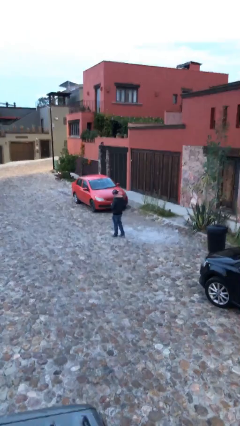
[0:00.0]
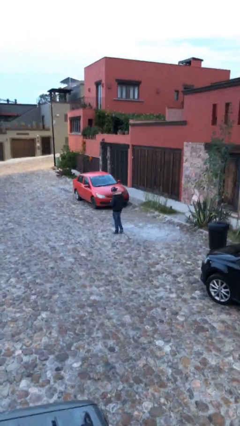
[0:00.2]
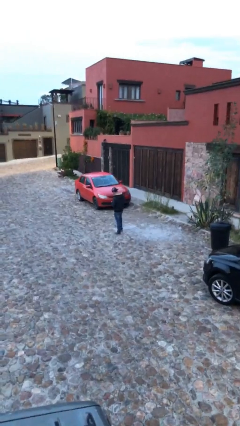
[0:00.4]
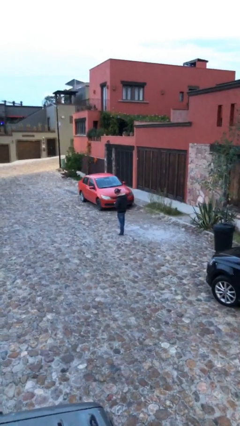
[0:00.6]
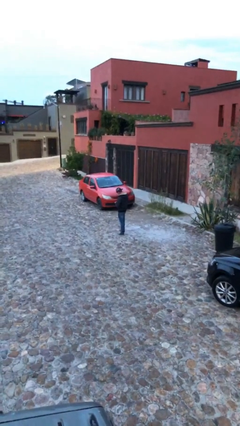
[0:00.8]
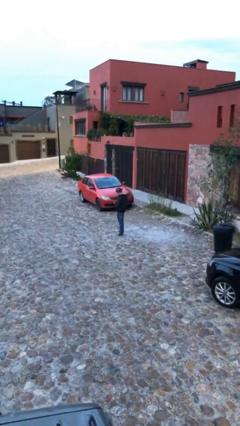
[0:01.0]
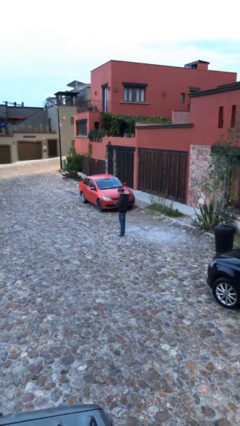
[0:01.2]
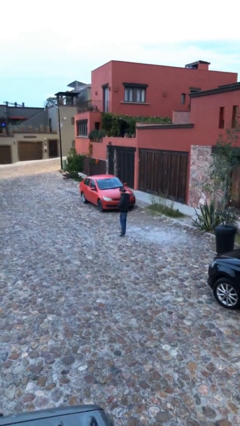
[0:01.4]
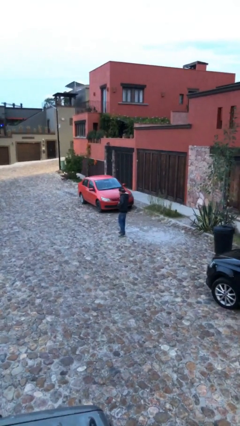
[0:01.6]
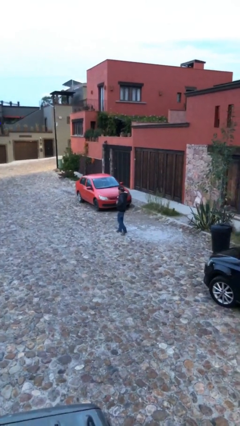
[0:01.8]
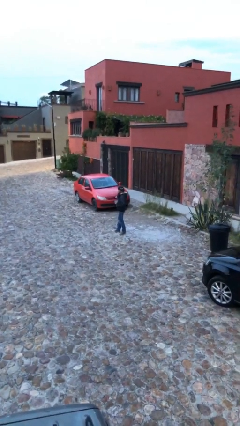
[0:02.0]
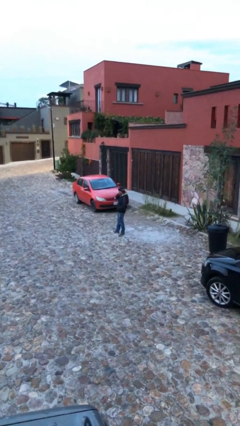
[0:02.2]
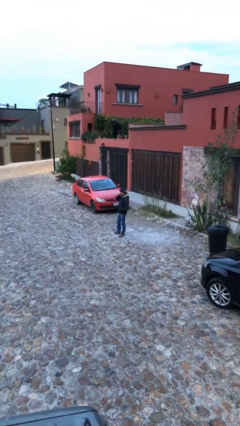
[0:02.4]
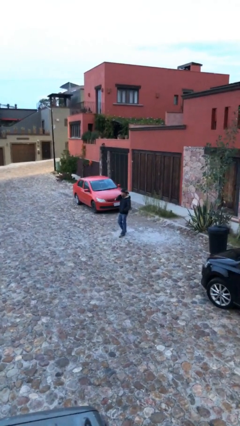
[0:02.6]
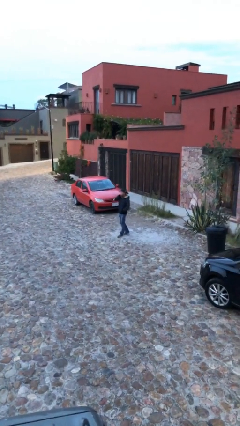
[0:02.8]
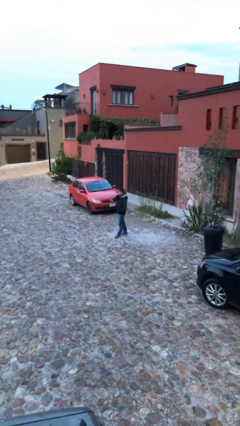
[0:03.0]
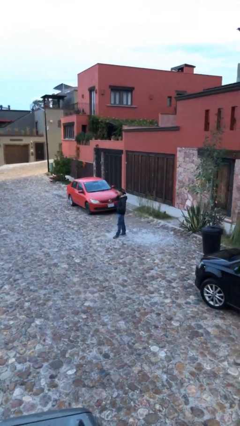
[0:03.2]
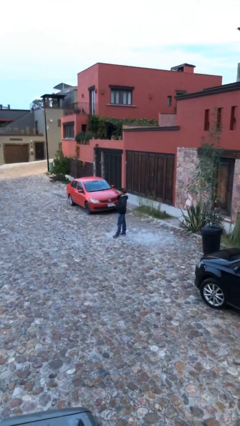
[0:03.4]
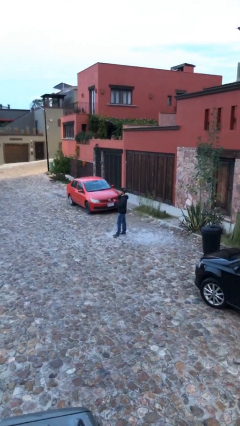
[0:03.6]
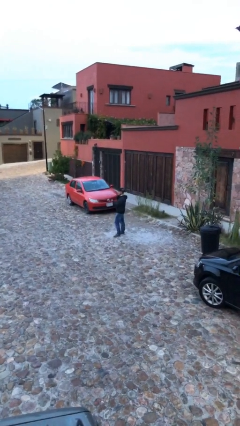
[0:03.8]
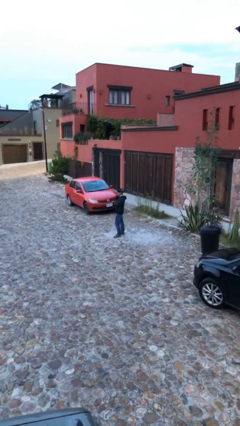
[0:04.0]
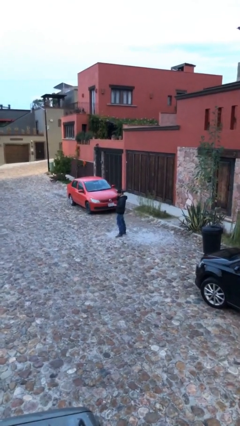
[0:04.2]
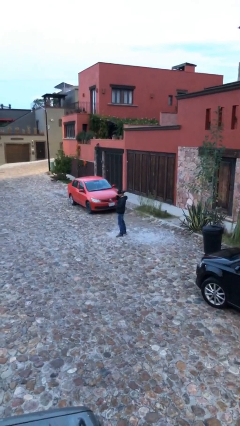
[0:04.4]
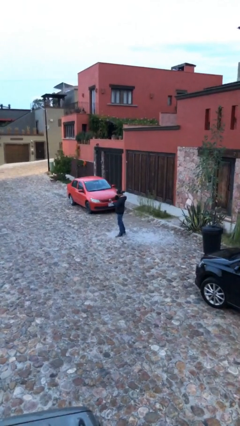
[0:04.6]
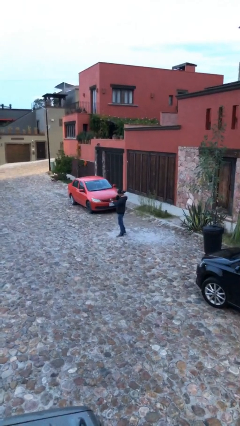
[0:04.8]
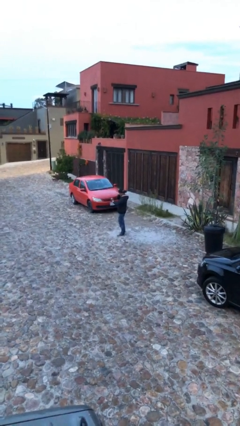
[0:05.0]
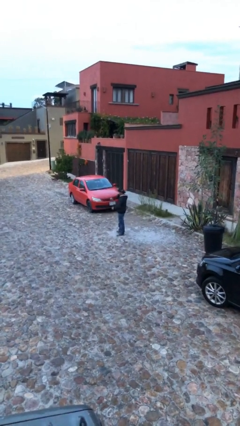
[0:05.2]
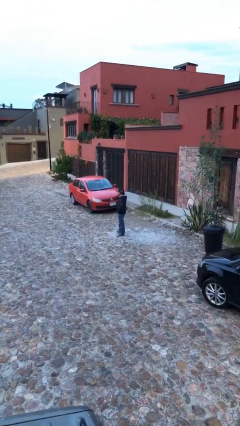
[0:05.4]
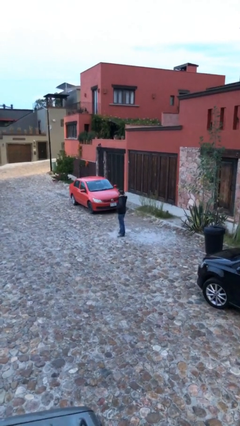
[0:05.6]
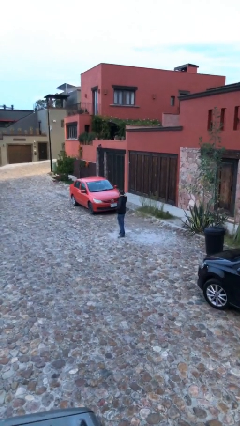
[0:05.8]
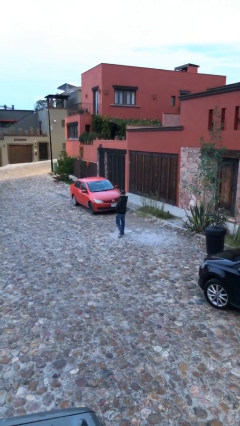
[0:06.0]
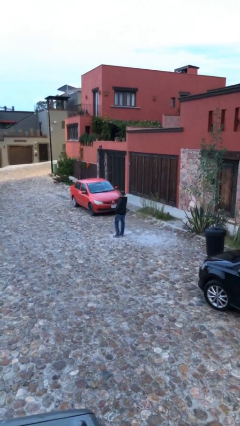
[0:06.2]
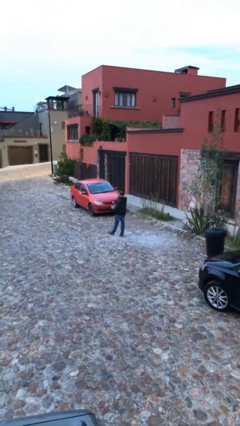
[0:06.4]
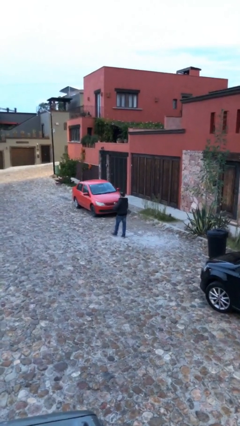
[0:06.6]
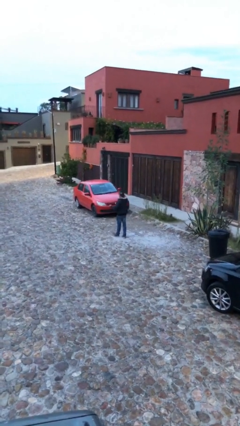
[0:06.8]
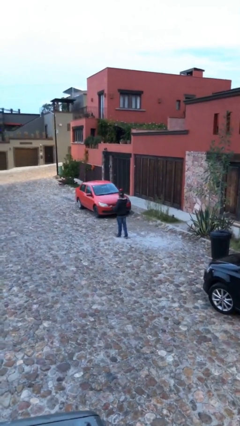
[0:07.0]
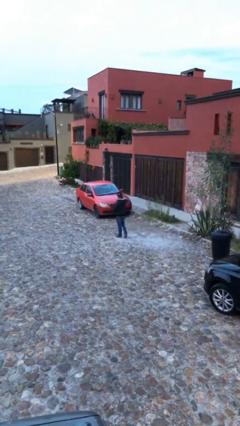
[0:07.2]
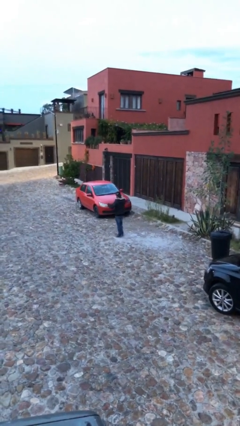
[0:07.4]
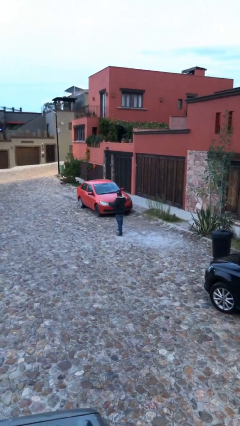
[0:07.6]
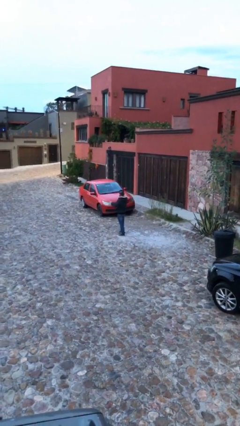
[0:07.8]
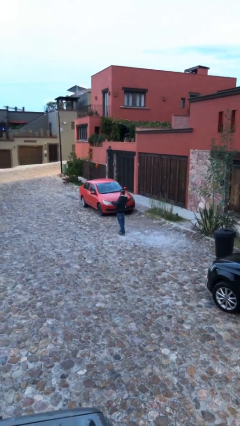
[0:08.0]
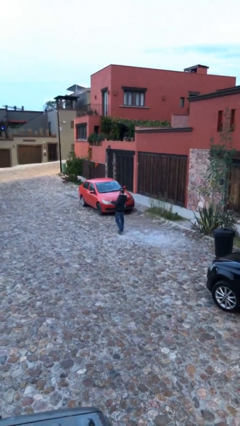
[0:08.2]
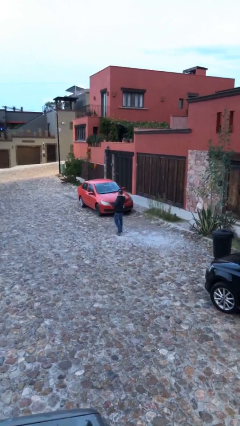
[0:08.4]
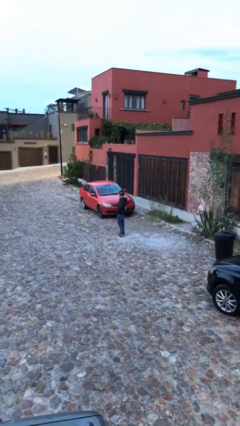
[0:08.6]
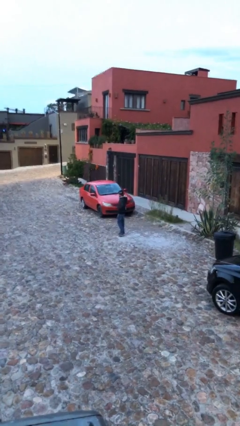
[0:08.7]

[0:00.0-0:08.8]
person talks on phone

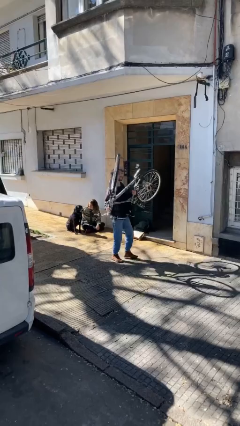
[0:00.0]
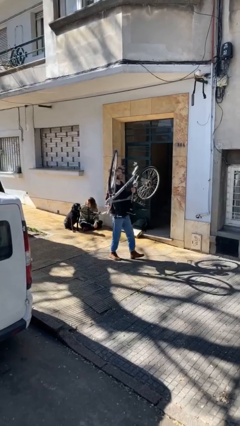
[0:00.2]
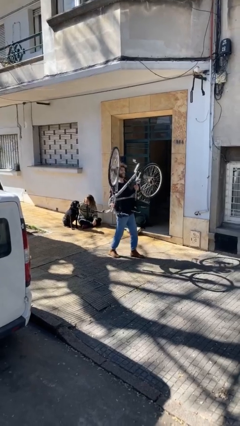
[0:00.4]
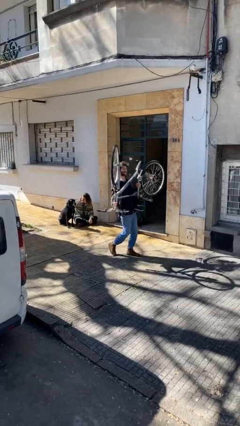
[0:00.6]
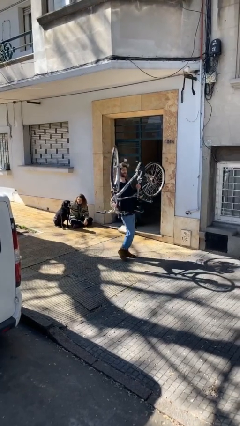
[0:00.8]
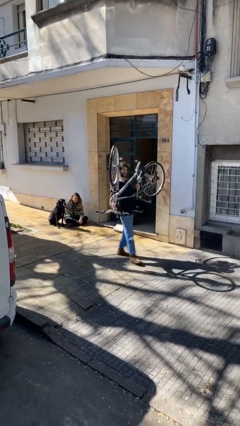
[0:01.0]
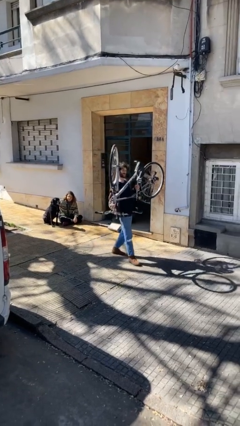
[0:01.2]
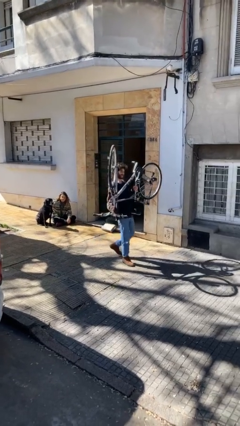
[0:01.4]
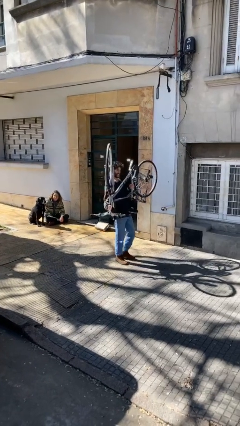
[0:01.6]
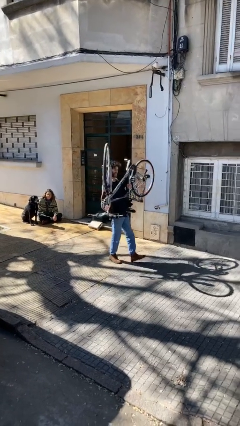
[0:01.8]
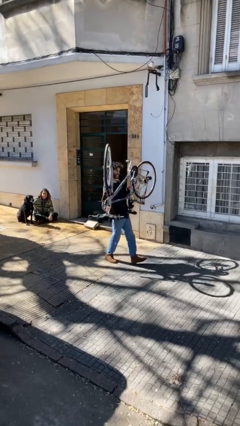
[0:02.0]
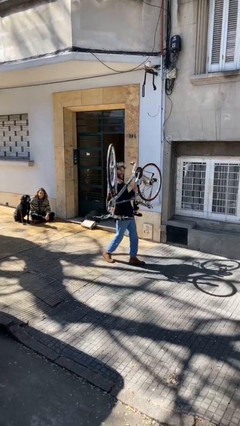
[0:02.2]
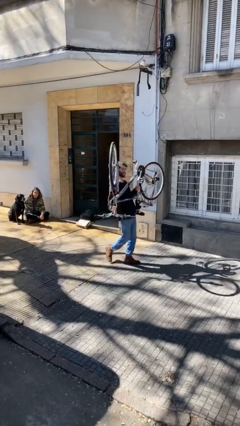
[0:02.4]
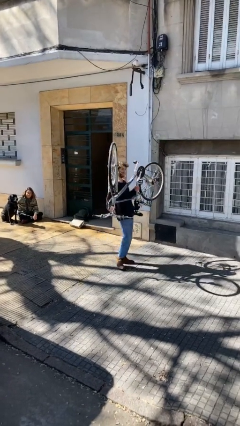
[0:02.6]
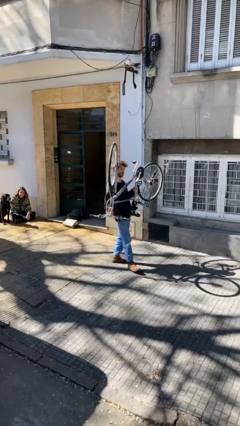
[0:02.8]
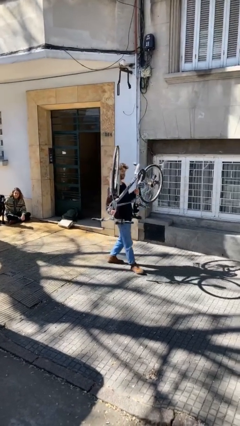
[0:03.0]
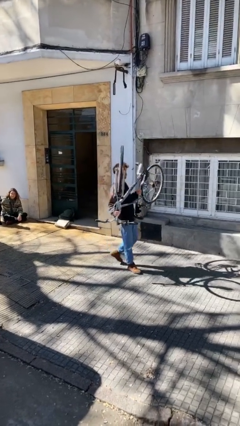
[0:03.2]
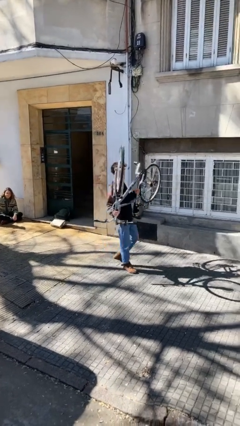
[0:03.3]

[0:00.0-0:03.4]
person carries heavy object

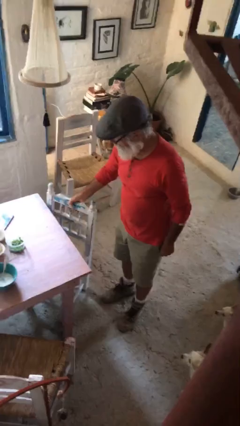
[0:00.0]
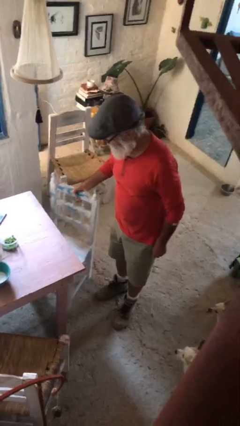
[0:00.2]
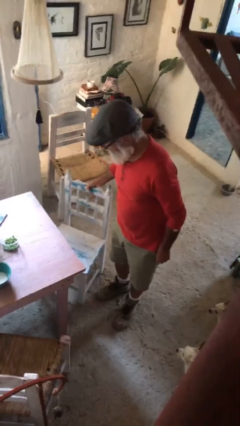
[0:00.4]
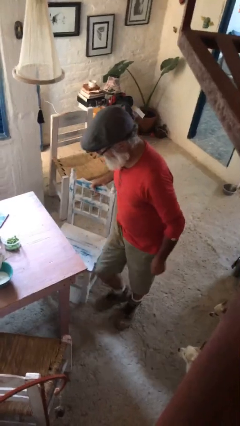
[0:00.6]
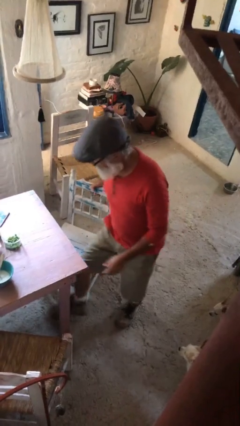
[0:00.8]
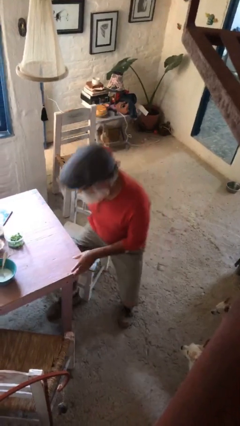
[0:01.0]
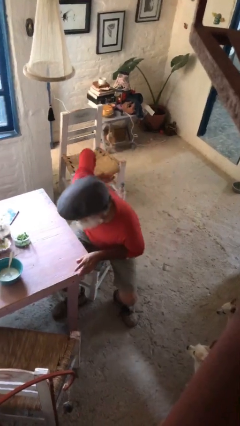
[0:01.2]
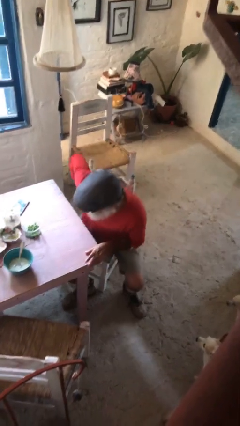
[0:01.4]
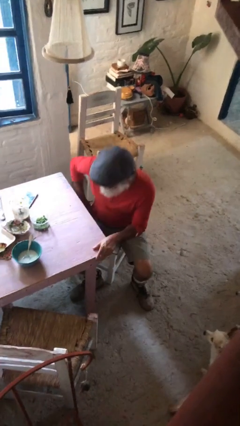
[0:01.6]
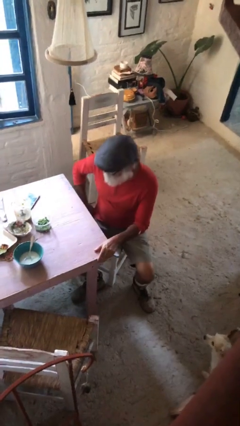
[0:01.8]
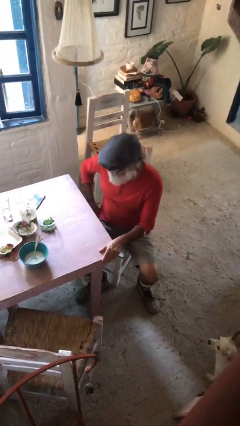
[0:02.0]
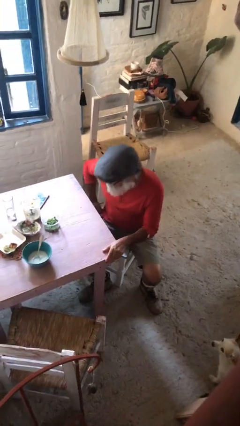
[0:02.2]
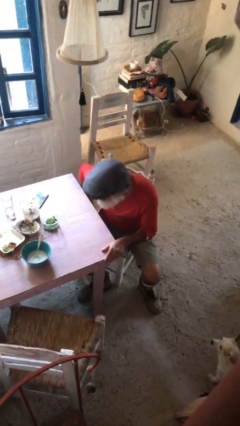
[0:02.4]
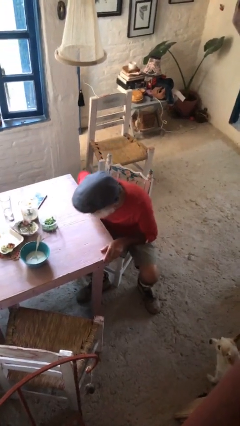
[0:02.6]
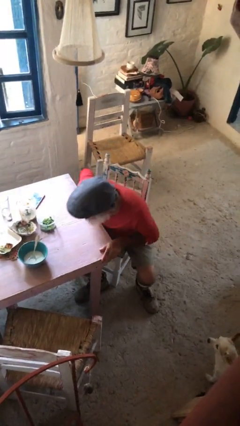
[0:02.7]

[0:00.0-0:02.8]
person sits down

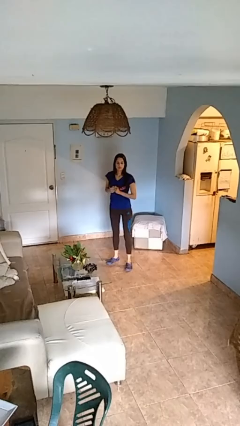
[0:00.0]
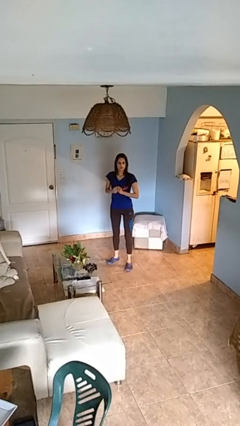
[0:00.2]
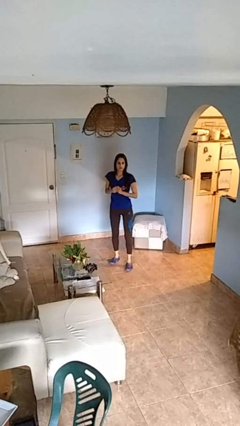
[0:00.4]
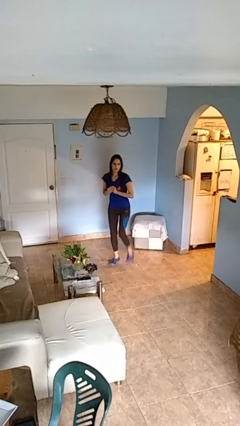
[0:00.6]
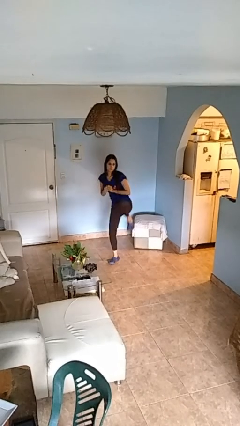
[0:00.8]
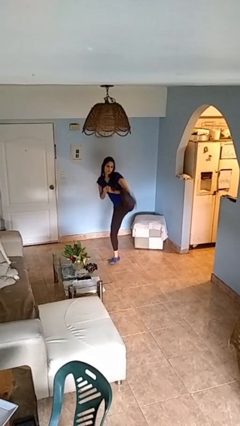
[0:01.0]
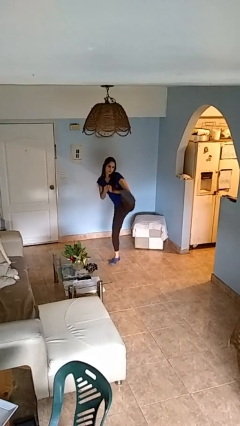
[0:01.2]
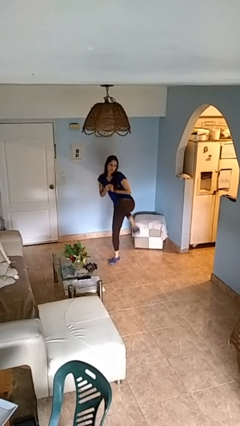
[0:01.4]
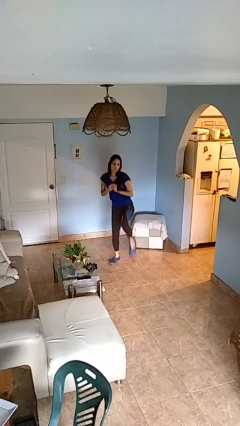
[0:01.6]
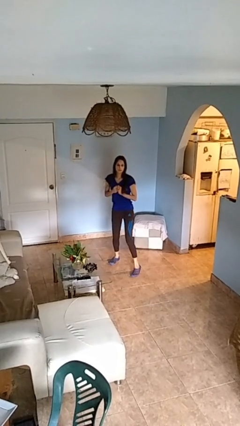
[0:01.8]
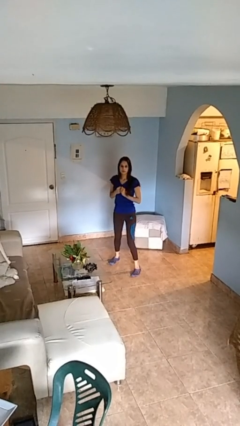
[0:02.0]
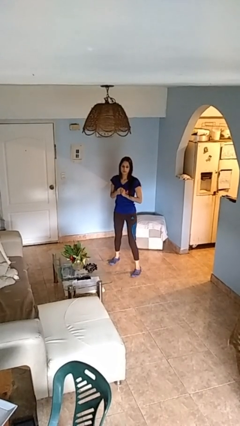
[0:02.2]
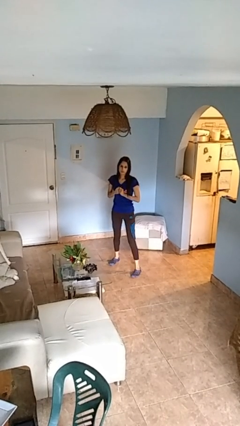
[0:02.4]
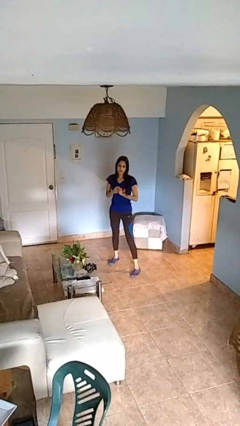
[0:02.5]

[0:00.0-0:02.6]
person karate kicks
